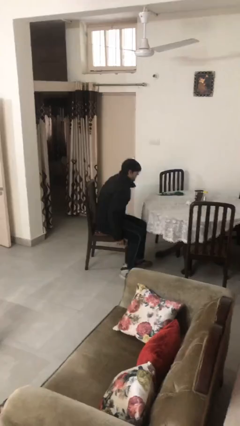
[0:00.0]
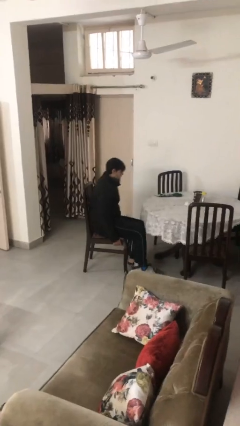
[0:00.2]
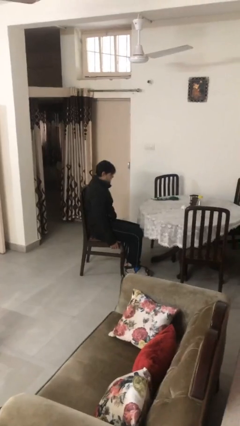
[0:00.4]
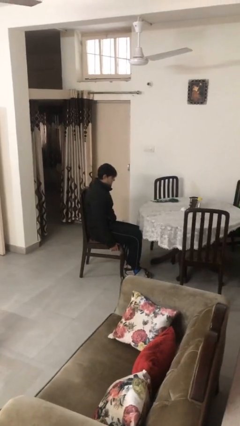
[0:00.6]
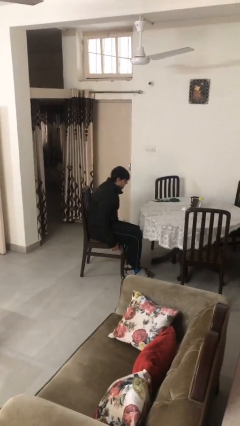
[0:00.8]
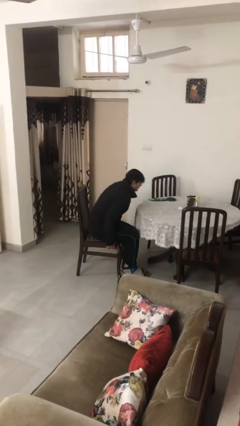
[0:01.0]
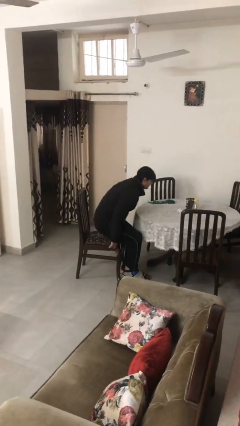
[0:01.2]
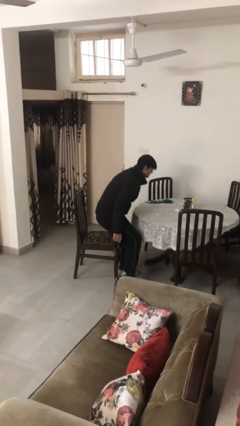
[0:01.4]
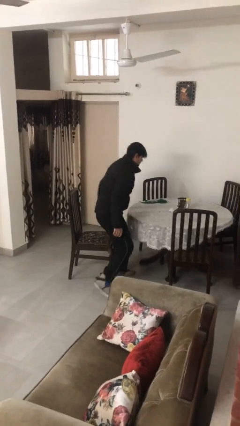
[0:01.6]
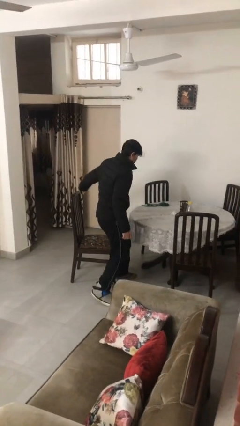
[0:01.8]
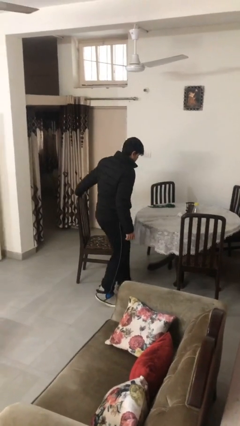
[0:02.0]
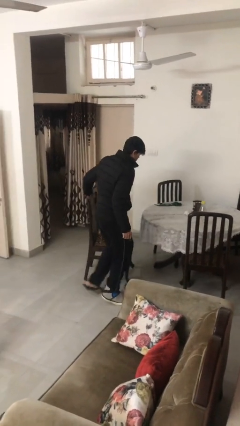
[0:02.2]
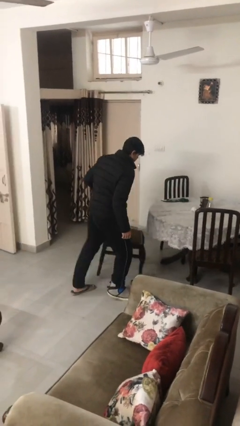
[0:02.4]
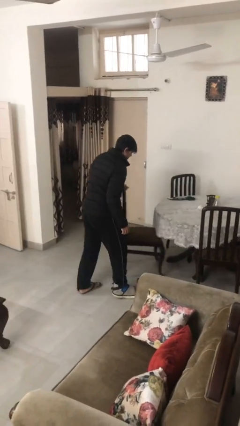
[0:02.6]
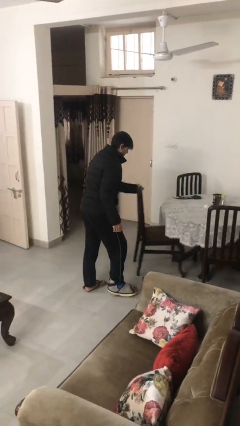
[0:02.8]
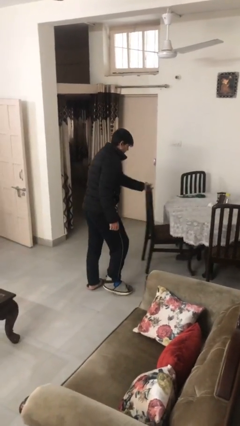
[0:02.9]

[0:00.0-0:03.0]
person stands up

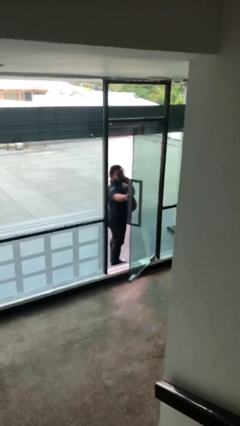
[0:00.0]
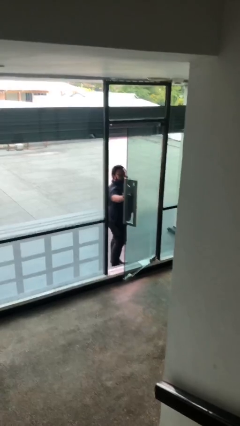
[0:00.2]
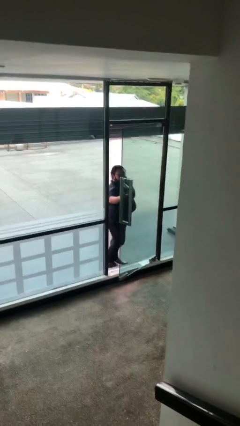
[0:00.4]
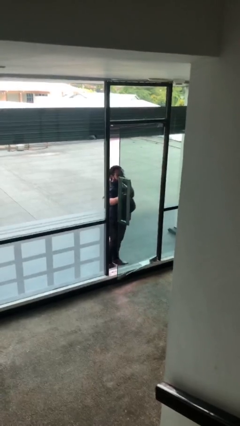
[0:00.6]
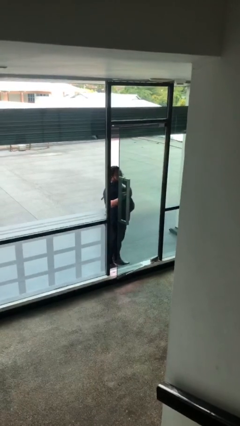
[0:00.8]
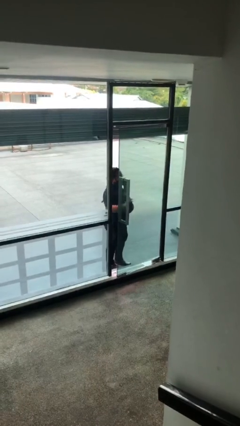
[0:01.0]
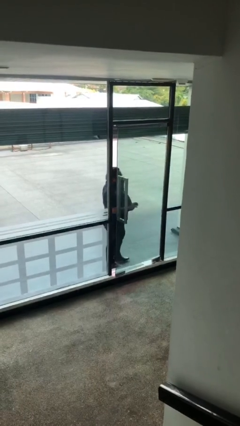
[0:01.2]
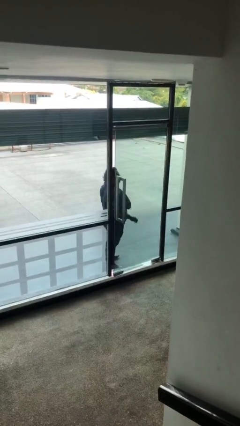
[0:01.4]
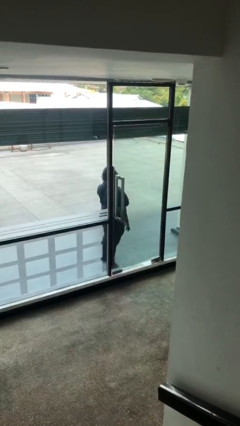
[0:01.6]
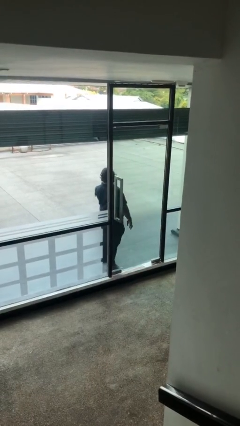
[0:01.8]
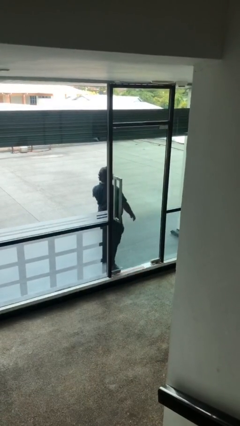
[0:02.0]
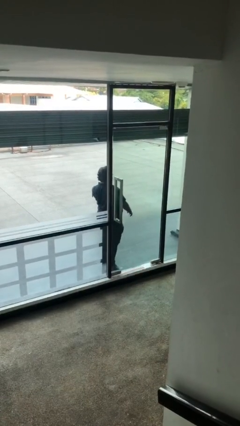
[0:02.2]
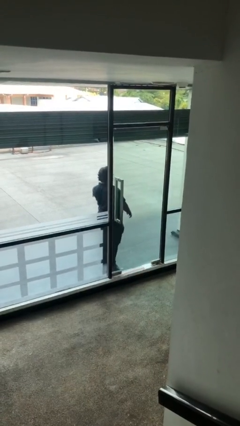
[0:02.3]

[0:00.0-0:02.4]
person closes facility door

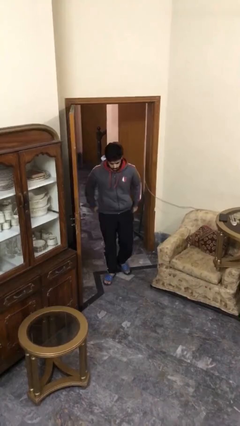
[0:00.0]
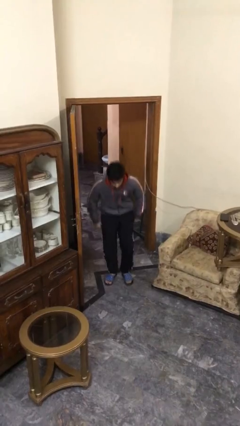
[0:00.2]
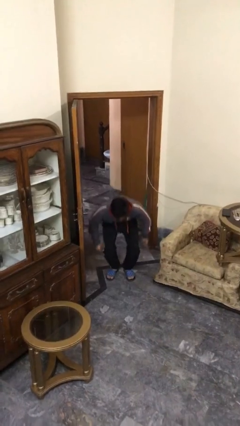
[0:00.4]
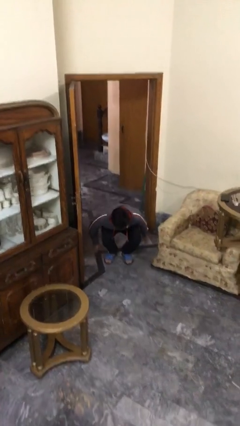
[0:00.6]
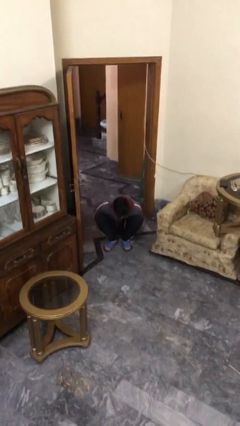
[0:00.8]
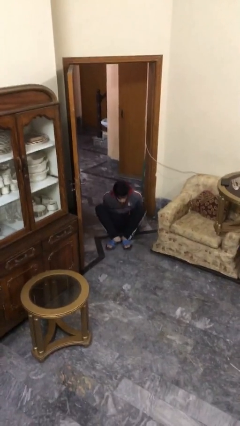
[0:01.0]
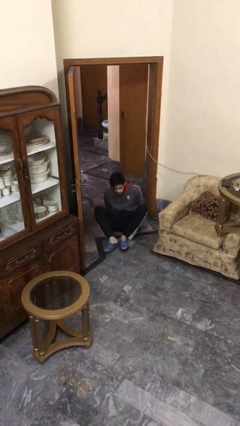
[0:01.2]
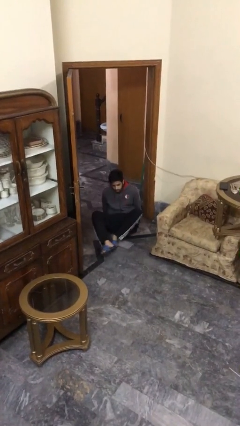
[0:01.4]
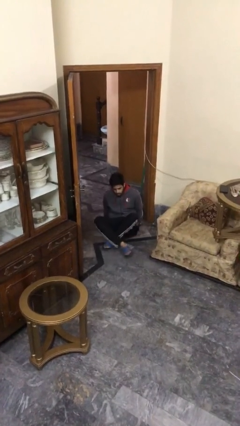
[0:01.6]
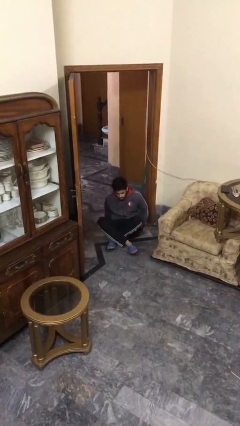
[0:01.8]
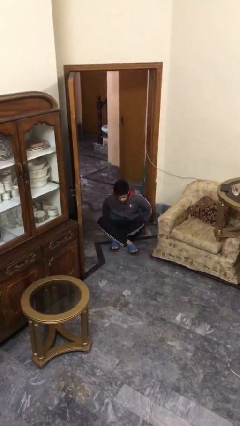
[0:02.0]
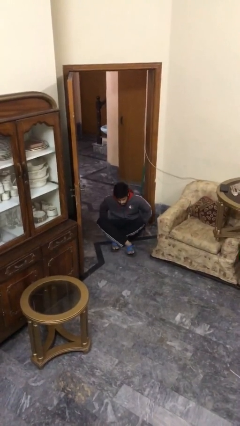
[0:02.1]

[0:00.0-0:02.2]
person sits down

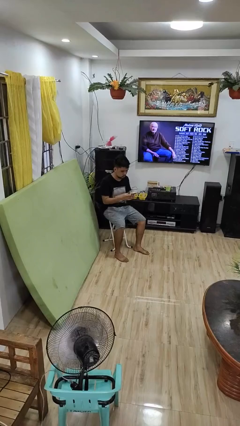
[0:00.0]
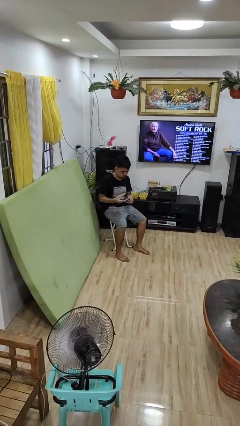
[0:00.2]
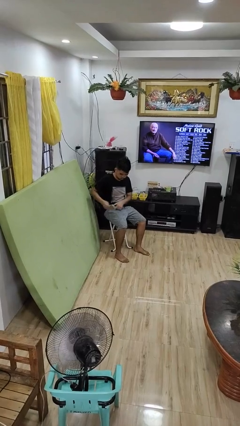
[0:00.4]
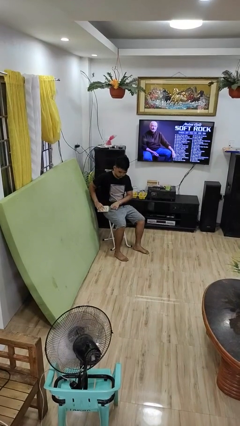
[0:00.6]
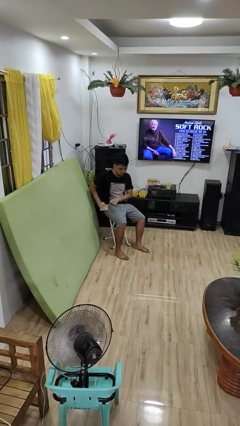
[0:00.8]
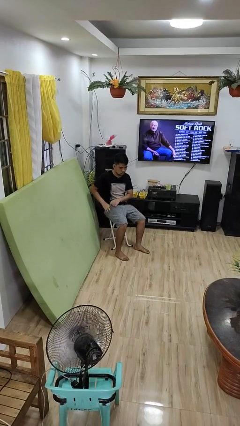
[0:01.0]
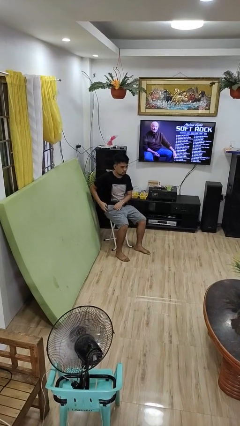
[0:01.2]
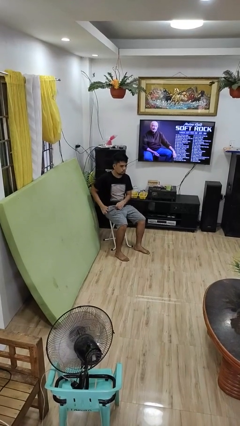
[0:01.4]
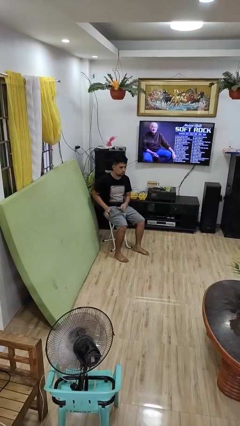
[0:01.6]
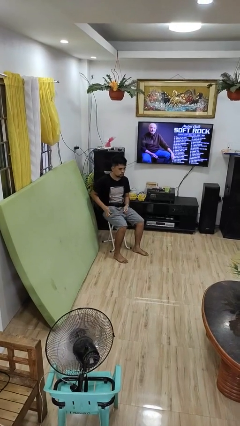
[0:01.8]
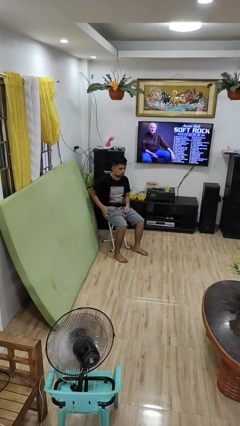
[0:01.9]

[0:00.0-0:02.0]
person puts phone into pocket

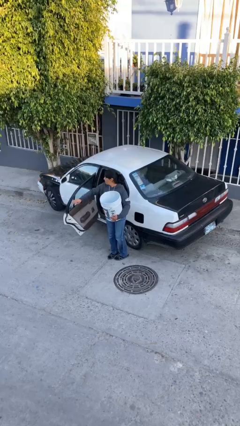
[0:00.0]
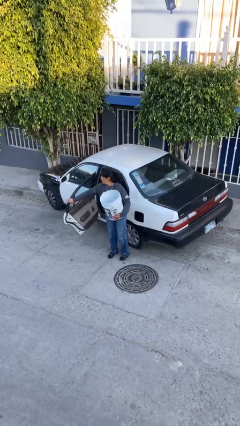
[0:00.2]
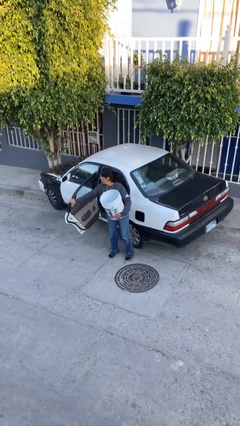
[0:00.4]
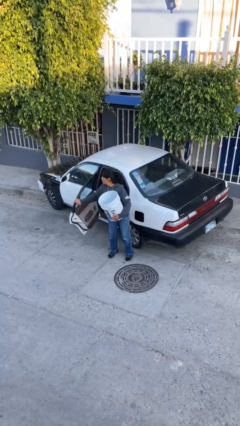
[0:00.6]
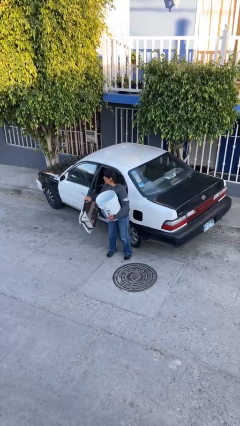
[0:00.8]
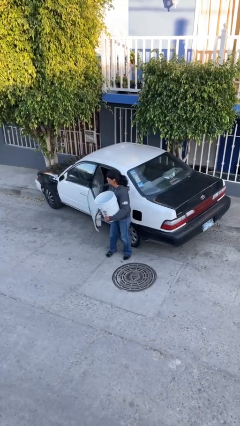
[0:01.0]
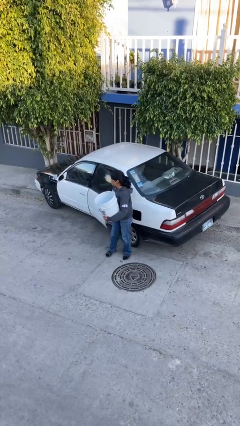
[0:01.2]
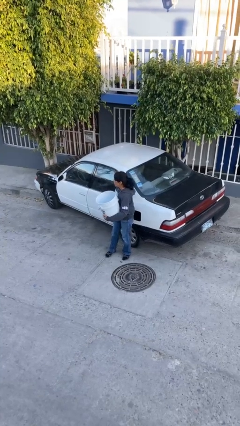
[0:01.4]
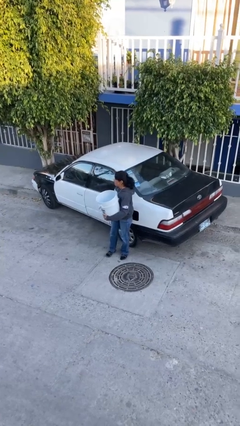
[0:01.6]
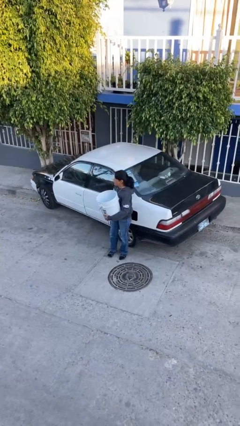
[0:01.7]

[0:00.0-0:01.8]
person closes car door

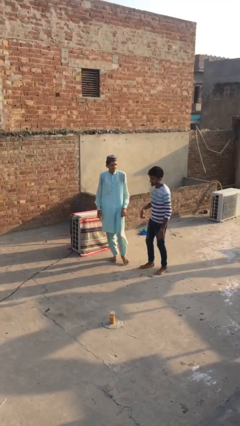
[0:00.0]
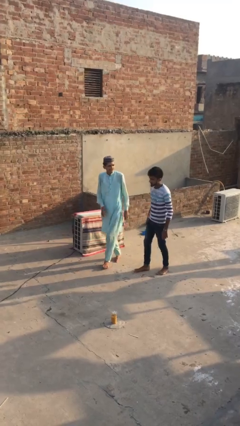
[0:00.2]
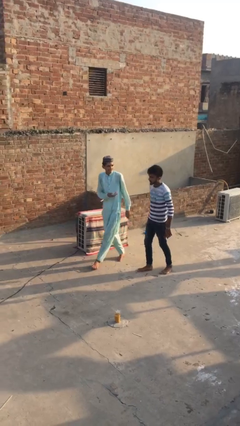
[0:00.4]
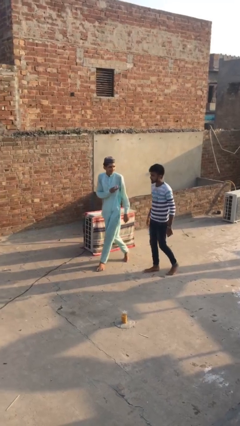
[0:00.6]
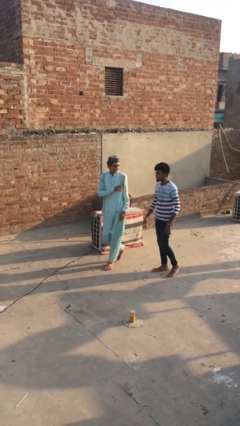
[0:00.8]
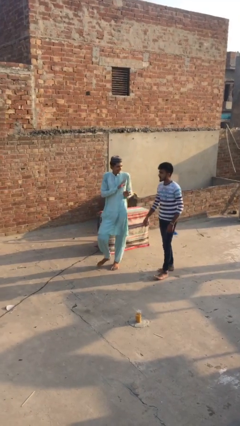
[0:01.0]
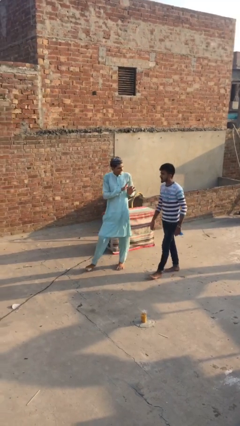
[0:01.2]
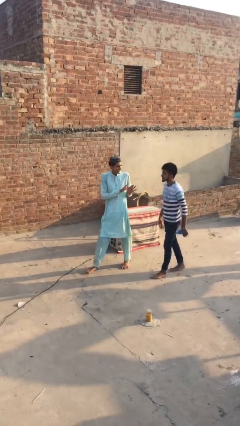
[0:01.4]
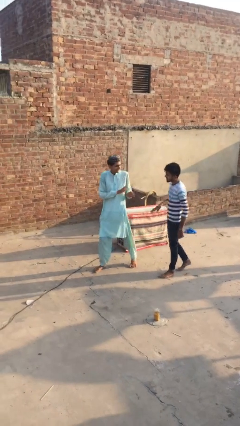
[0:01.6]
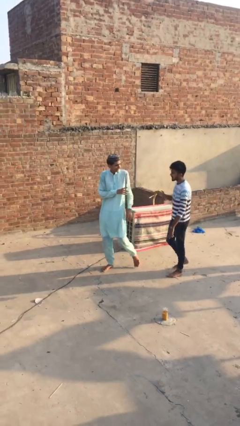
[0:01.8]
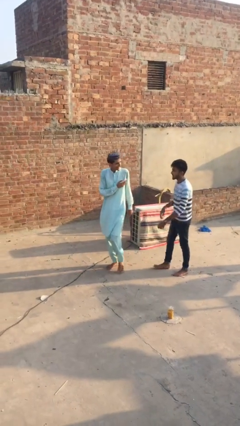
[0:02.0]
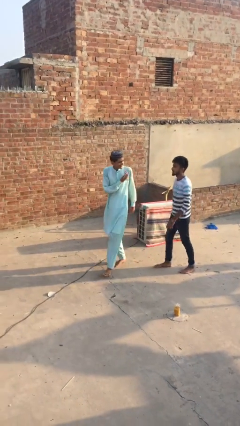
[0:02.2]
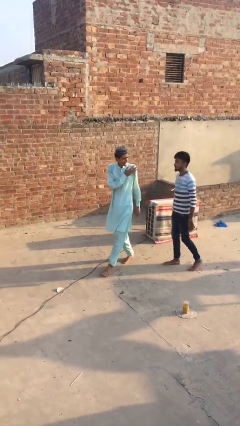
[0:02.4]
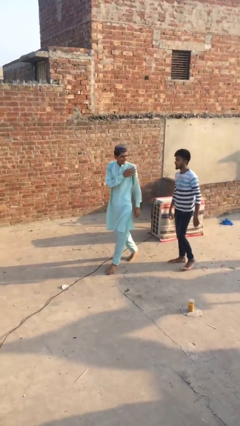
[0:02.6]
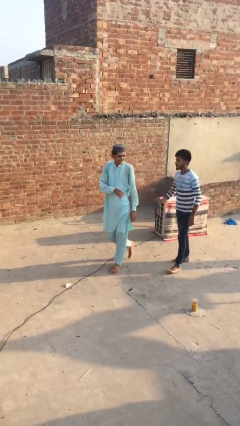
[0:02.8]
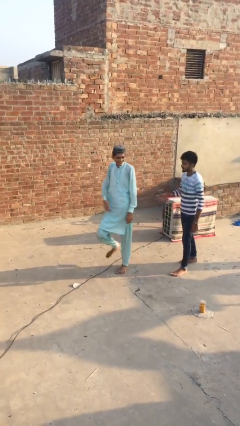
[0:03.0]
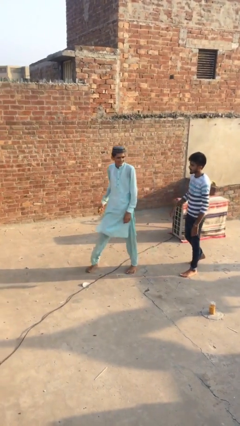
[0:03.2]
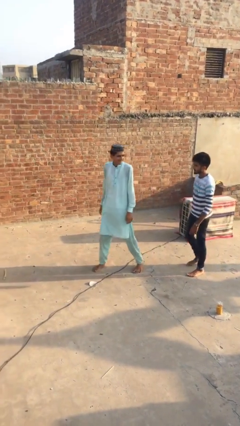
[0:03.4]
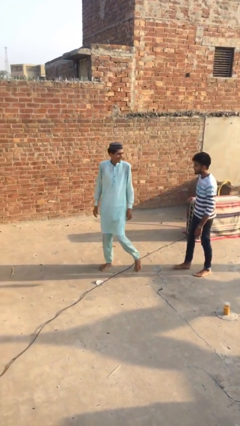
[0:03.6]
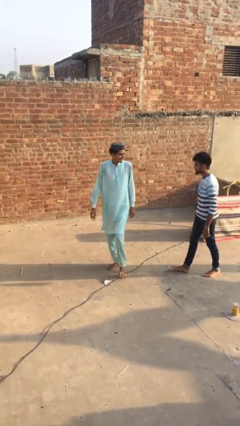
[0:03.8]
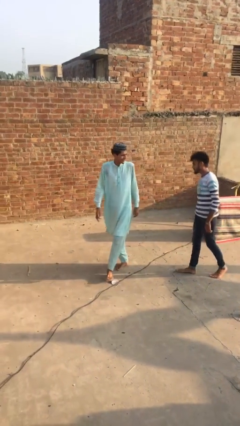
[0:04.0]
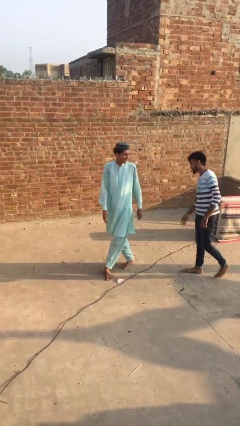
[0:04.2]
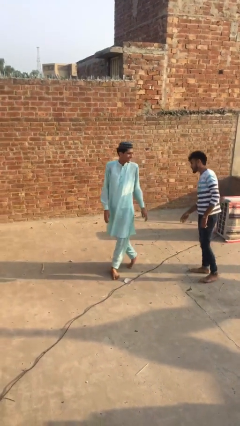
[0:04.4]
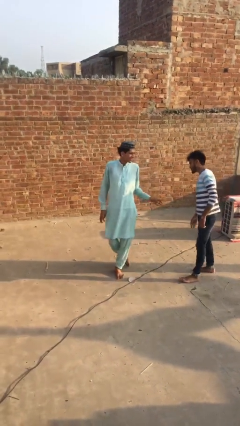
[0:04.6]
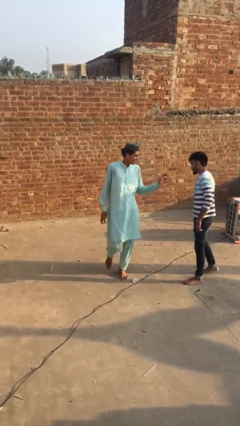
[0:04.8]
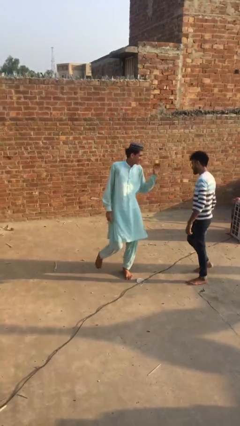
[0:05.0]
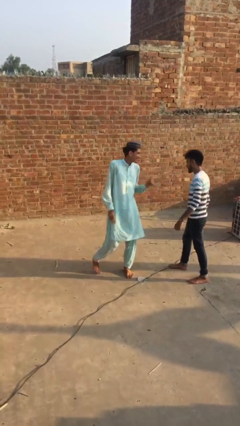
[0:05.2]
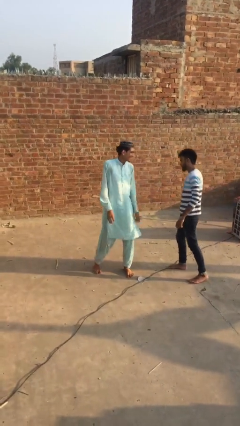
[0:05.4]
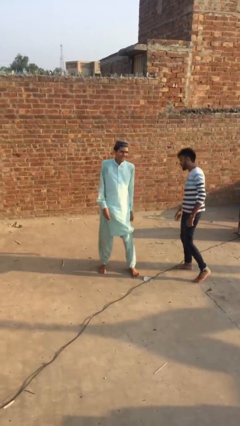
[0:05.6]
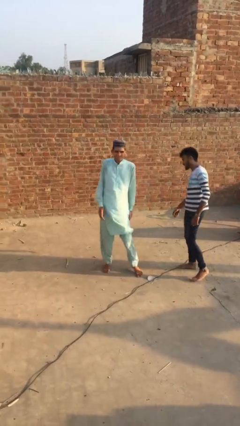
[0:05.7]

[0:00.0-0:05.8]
person talks to person

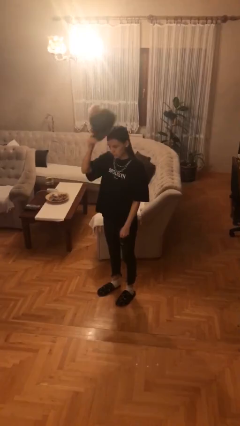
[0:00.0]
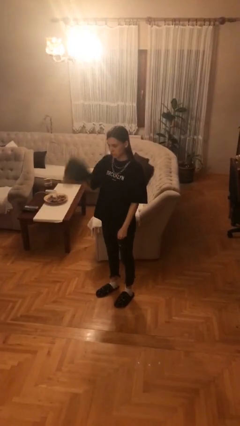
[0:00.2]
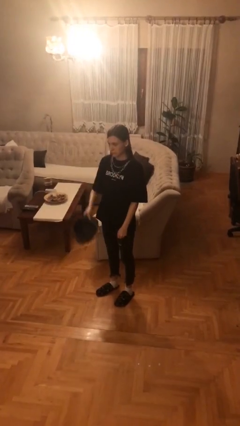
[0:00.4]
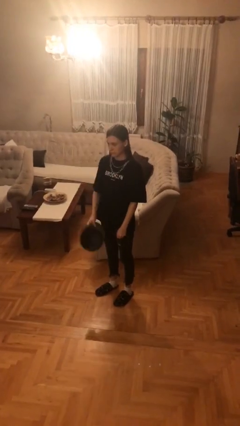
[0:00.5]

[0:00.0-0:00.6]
person takes off hat
